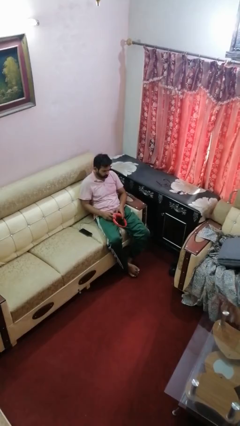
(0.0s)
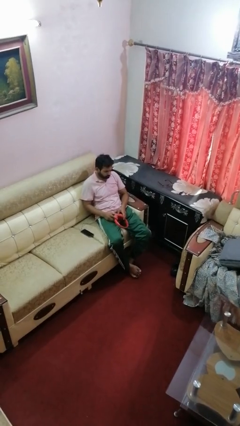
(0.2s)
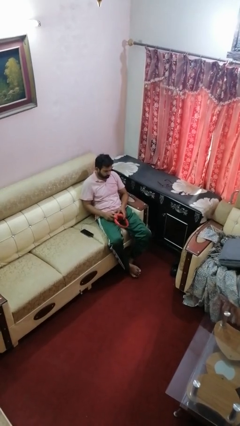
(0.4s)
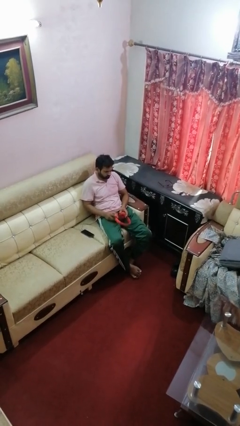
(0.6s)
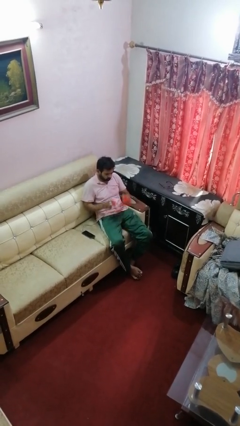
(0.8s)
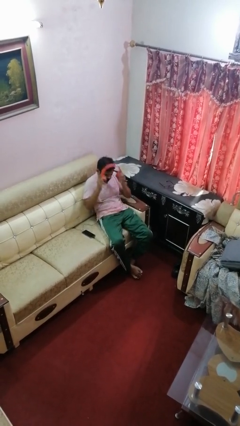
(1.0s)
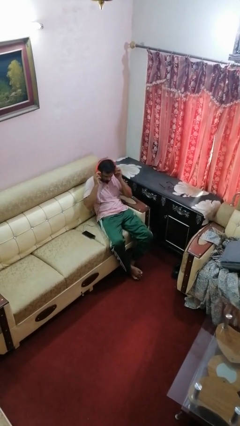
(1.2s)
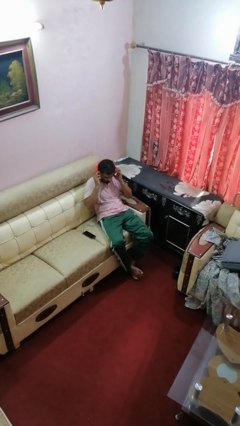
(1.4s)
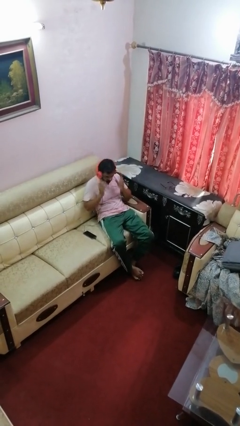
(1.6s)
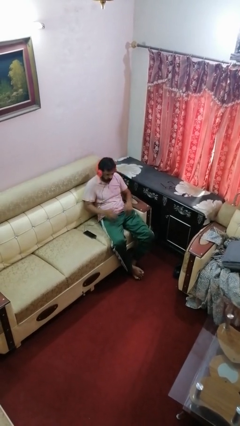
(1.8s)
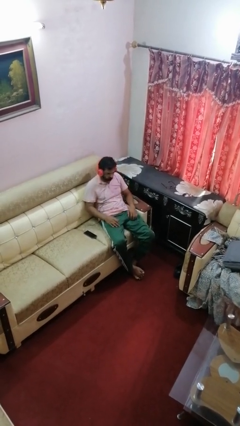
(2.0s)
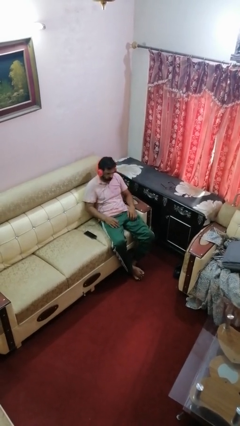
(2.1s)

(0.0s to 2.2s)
person puts on headphones

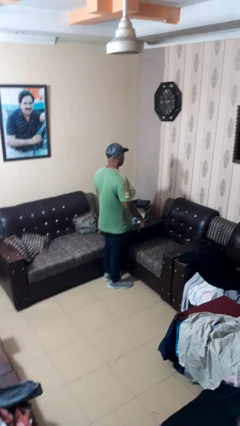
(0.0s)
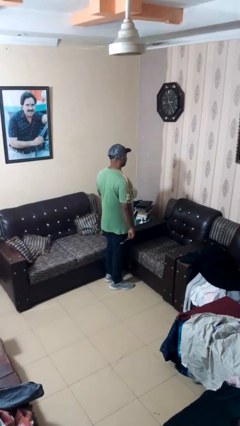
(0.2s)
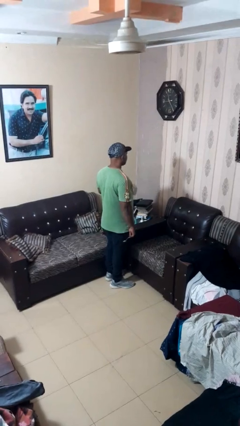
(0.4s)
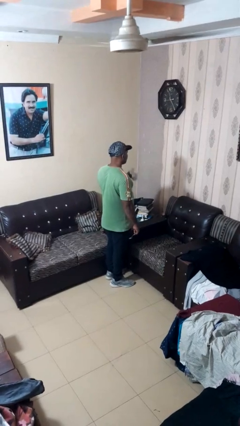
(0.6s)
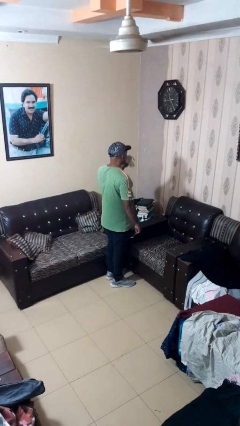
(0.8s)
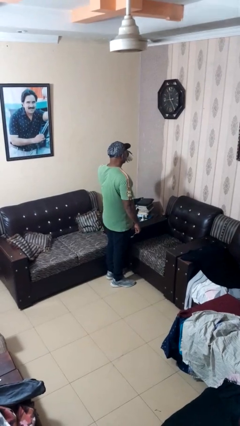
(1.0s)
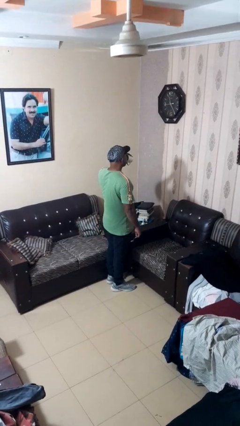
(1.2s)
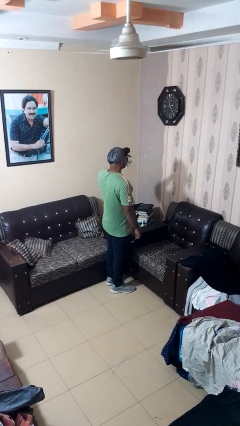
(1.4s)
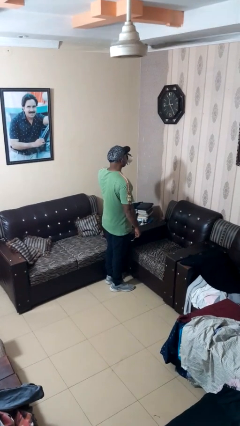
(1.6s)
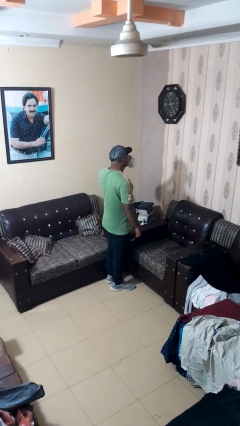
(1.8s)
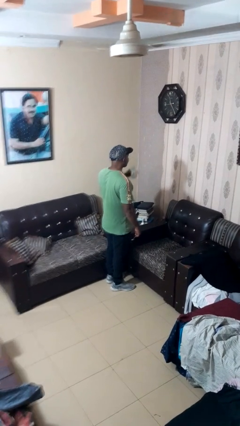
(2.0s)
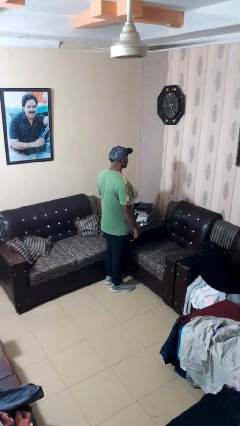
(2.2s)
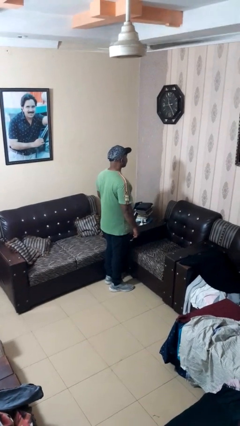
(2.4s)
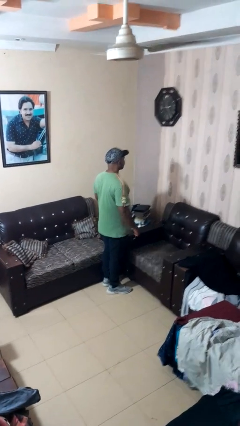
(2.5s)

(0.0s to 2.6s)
person drinks from mug

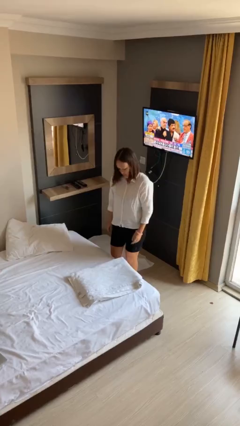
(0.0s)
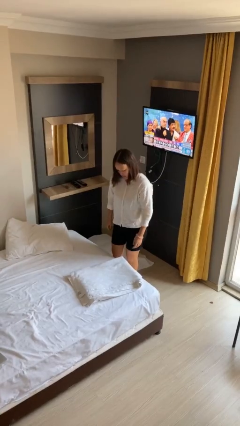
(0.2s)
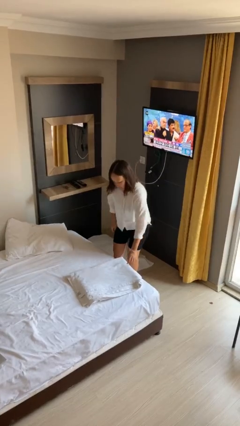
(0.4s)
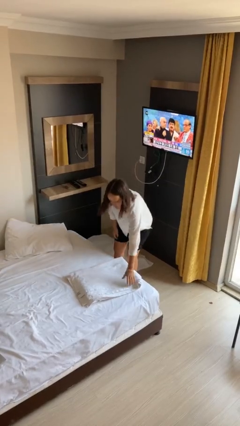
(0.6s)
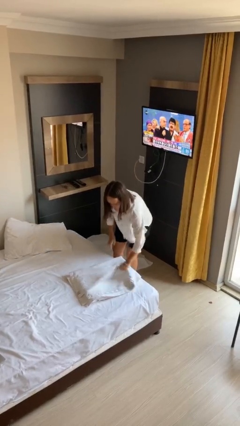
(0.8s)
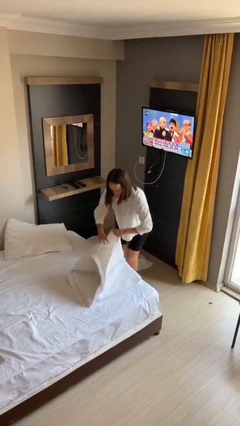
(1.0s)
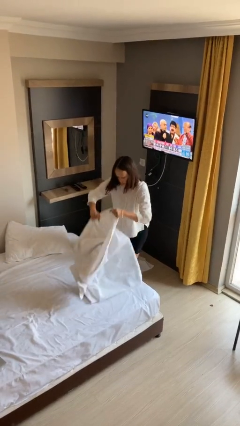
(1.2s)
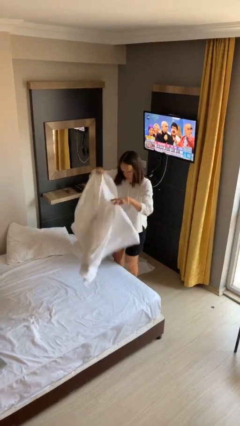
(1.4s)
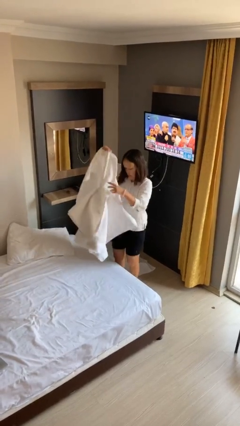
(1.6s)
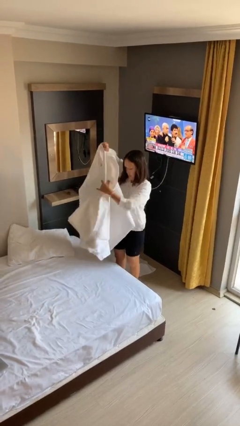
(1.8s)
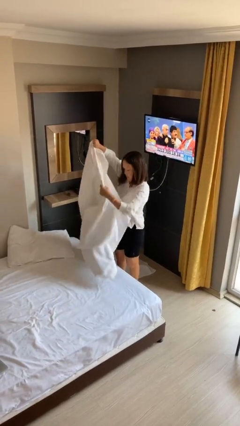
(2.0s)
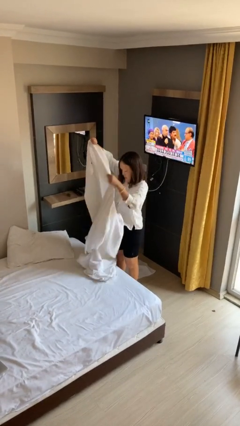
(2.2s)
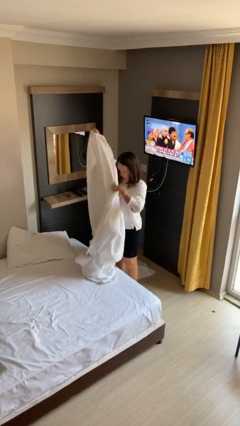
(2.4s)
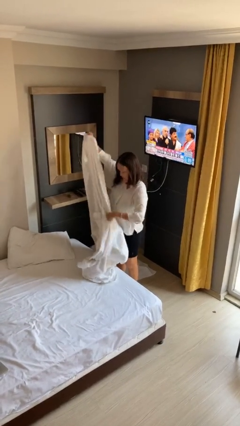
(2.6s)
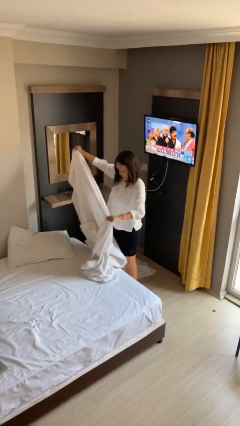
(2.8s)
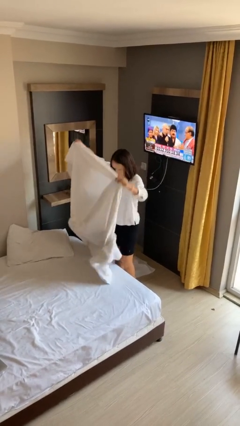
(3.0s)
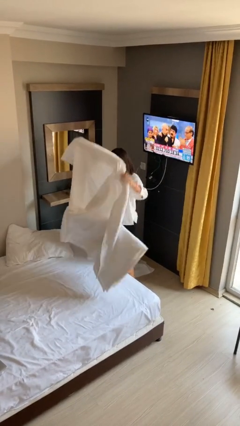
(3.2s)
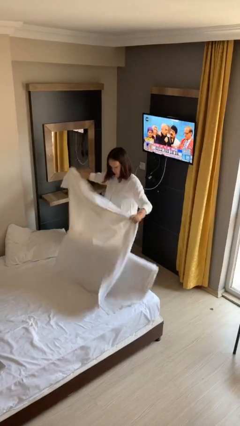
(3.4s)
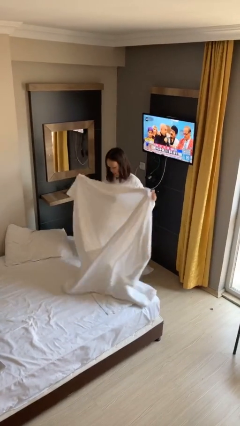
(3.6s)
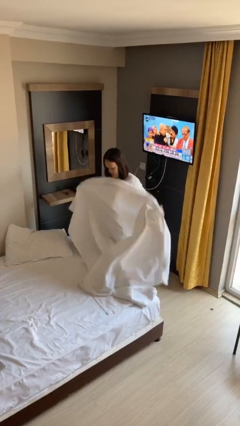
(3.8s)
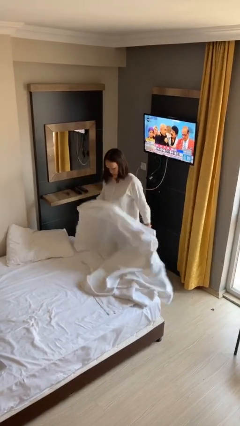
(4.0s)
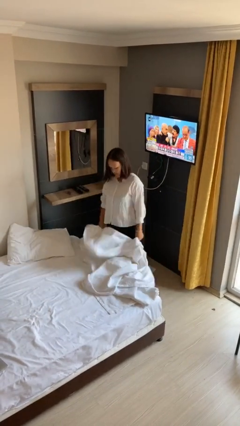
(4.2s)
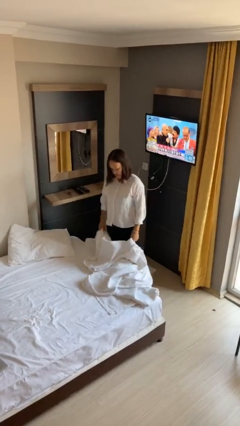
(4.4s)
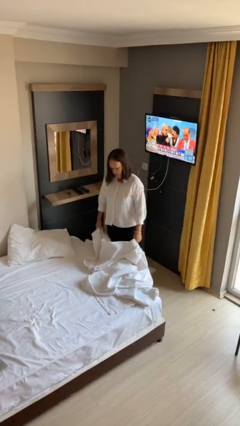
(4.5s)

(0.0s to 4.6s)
person unfolds blanket

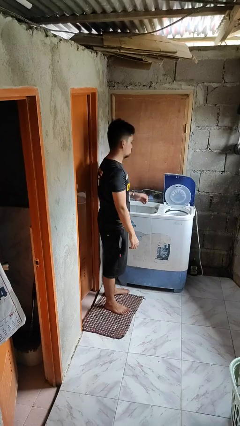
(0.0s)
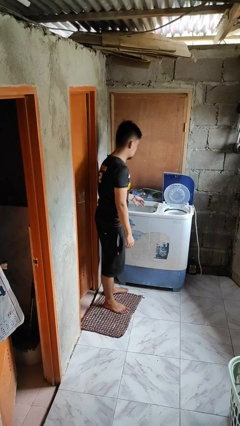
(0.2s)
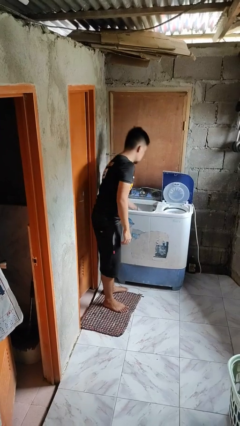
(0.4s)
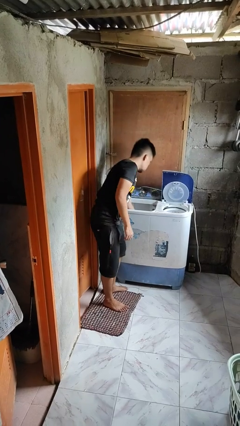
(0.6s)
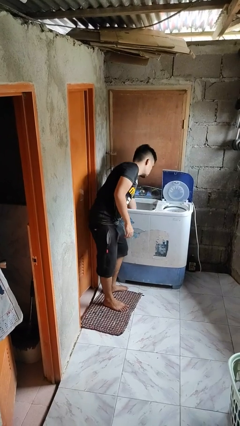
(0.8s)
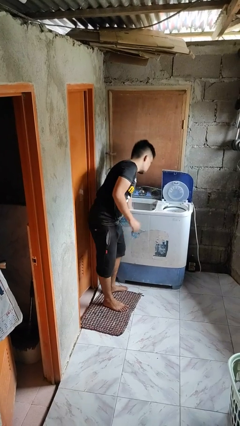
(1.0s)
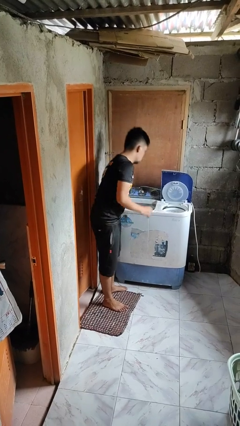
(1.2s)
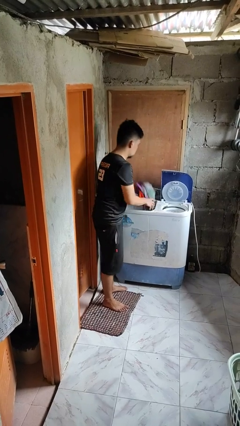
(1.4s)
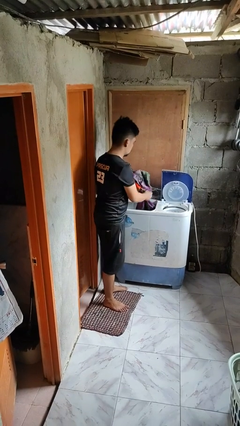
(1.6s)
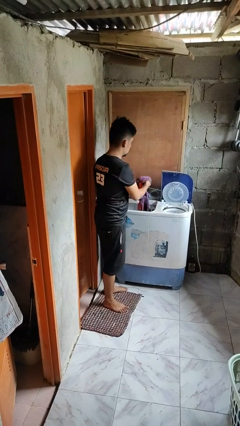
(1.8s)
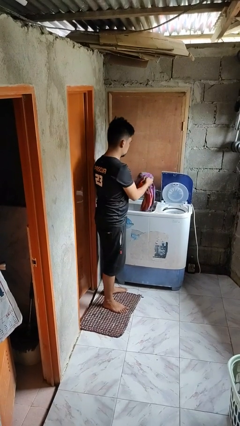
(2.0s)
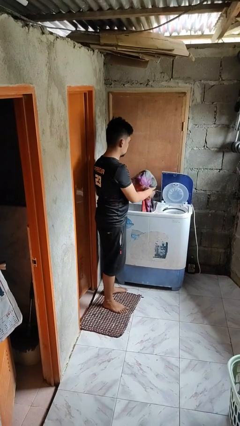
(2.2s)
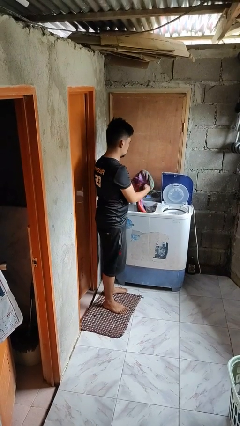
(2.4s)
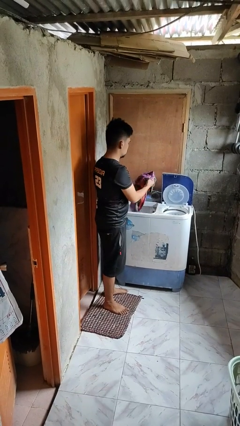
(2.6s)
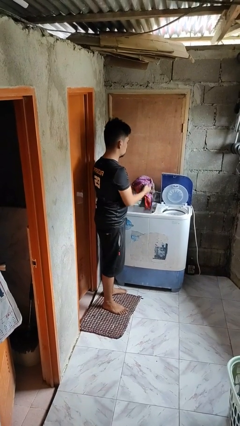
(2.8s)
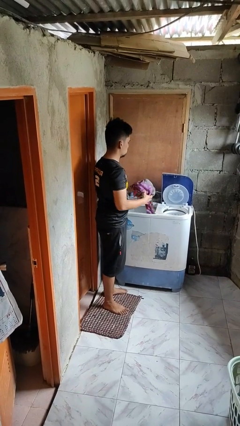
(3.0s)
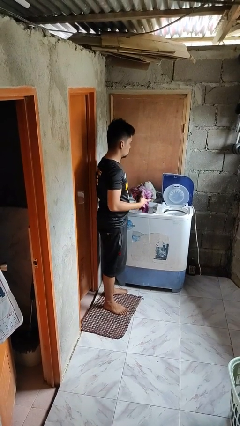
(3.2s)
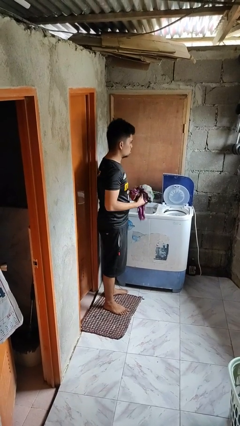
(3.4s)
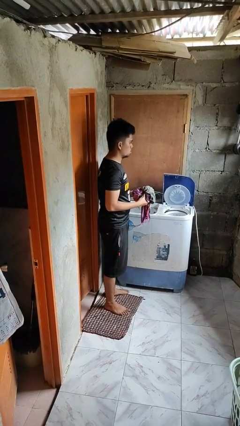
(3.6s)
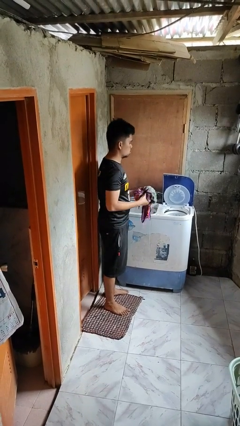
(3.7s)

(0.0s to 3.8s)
person unloads clotheswasher

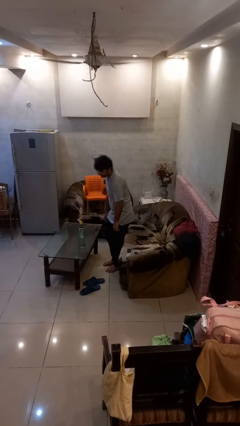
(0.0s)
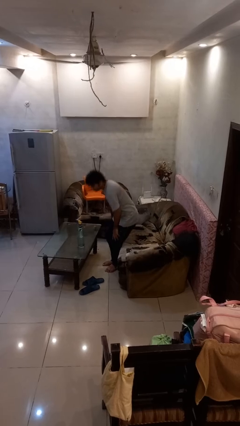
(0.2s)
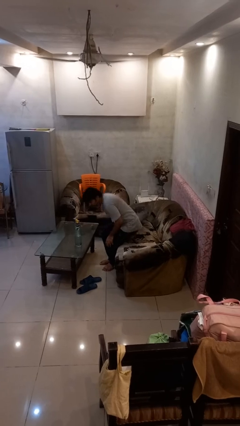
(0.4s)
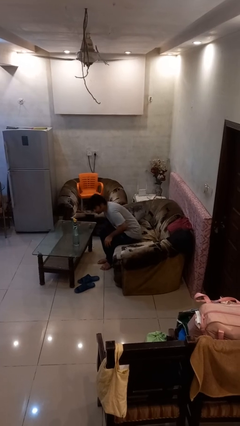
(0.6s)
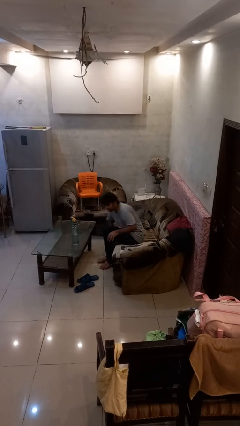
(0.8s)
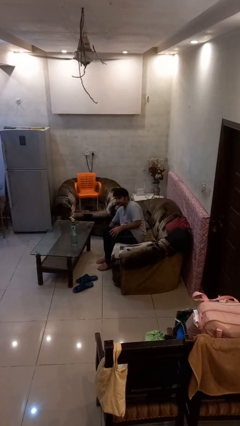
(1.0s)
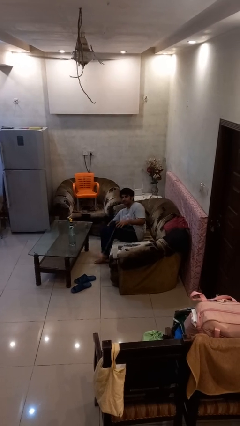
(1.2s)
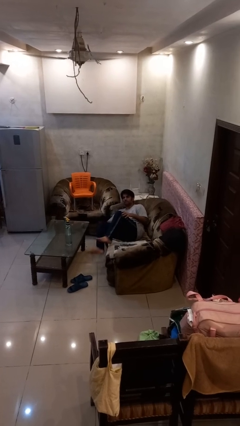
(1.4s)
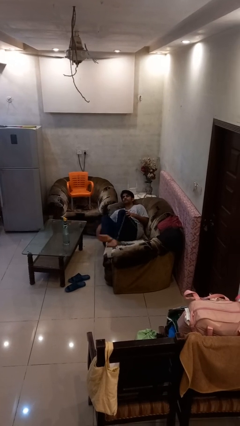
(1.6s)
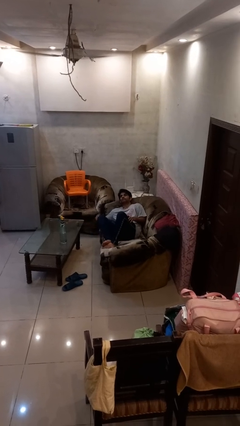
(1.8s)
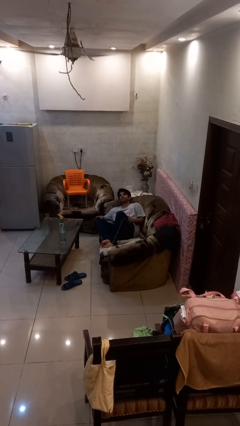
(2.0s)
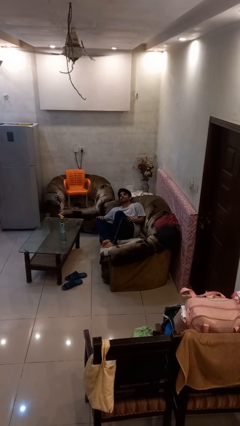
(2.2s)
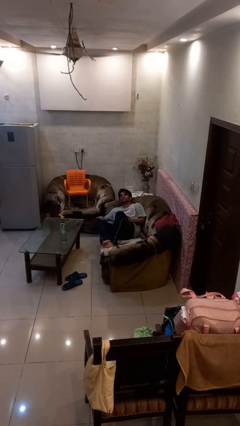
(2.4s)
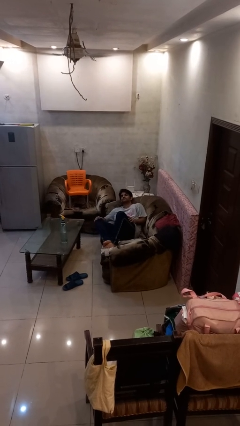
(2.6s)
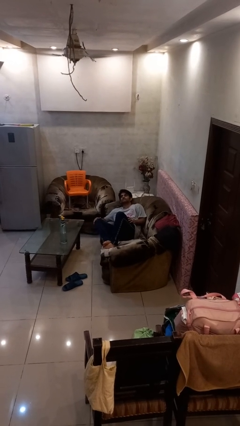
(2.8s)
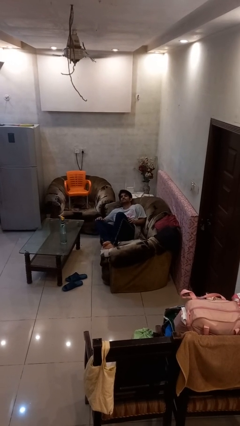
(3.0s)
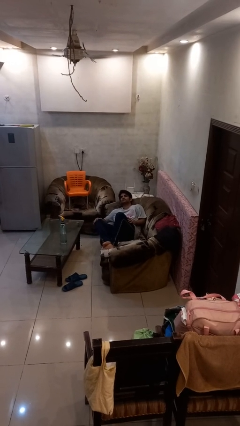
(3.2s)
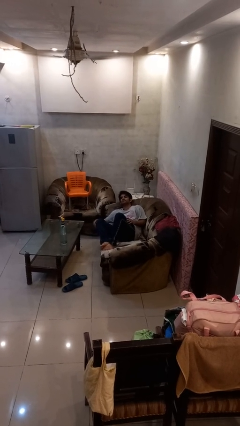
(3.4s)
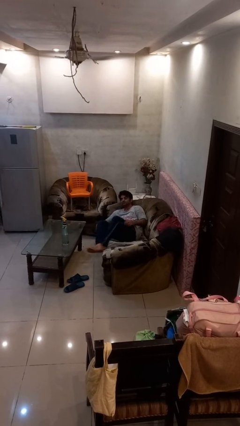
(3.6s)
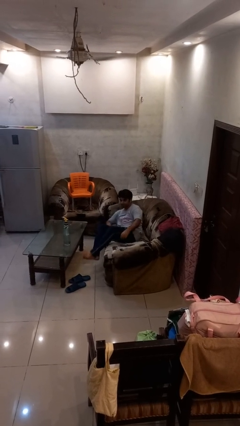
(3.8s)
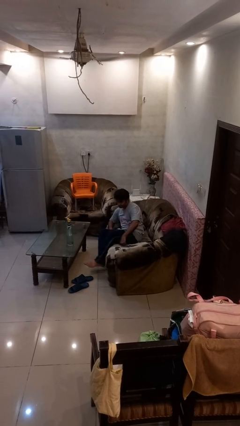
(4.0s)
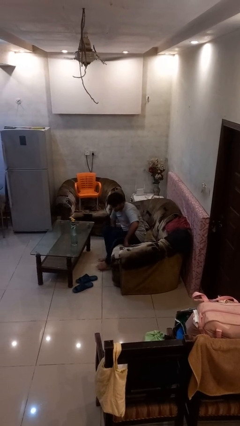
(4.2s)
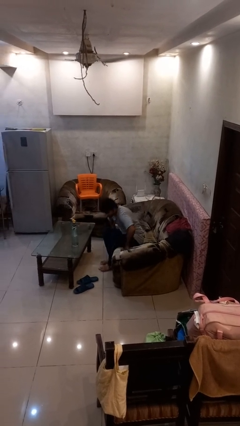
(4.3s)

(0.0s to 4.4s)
person lies down on couch

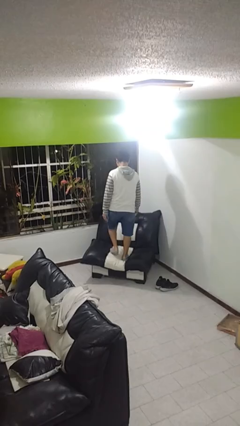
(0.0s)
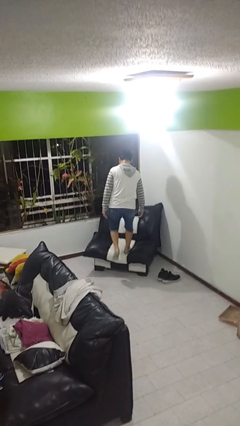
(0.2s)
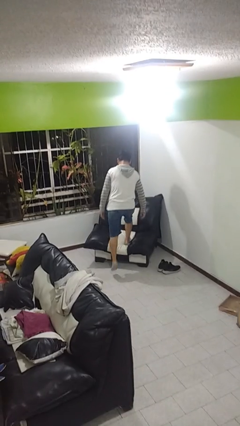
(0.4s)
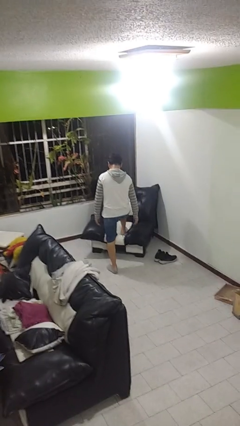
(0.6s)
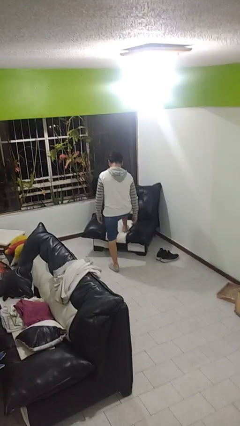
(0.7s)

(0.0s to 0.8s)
person climbs off couch
